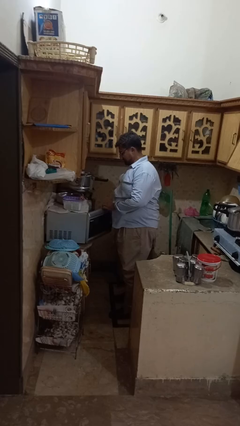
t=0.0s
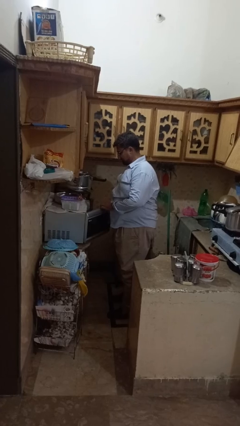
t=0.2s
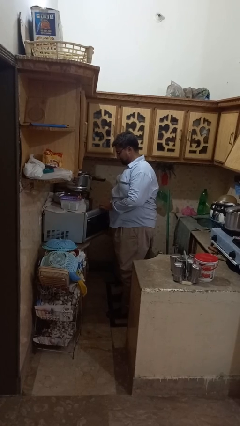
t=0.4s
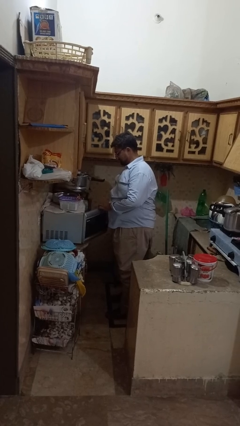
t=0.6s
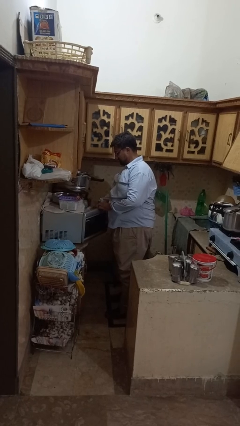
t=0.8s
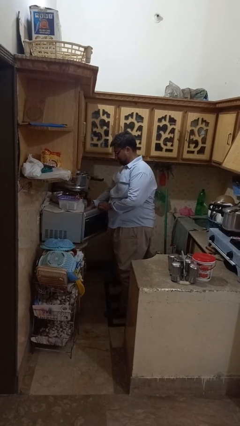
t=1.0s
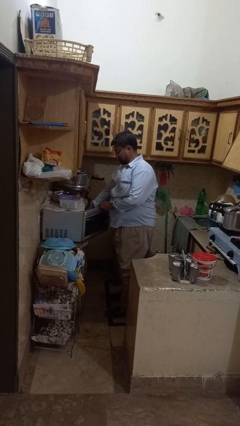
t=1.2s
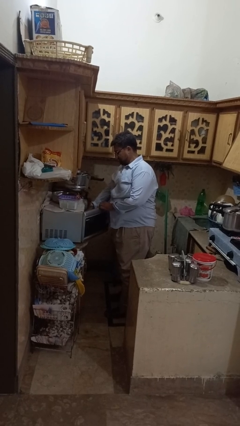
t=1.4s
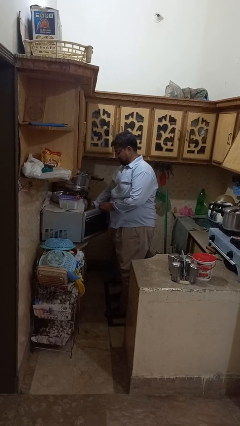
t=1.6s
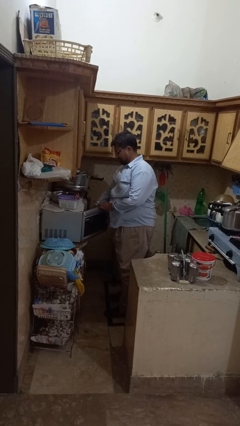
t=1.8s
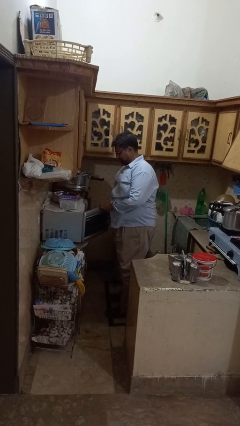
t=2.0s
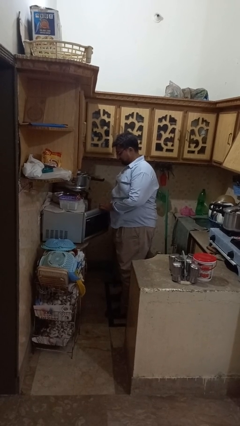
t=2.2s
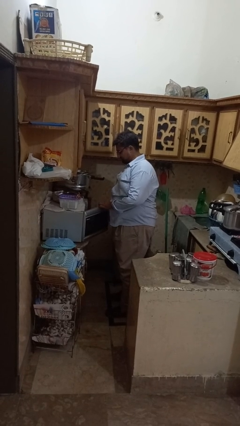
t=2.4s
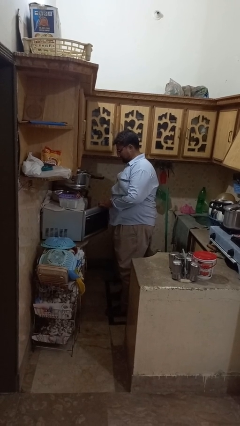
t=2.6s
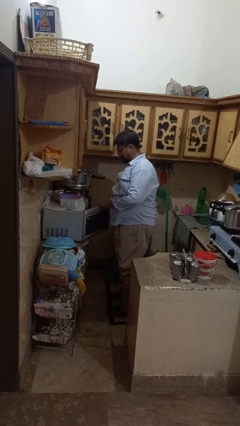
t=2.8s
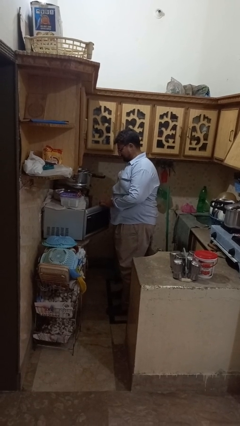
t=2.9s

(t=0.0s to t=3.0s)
person puts object into microwave

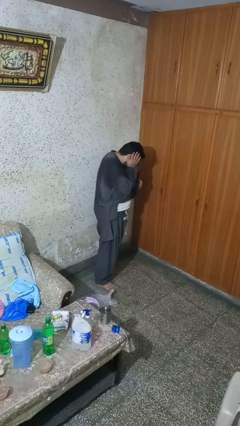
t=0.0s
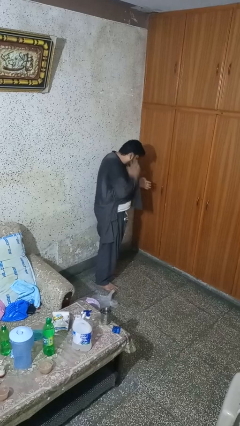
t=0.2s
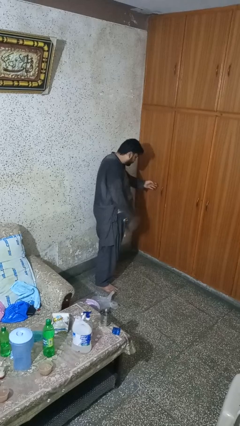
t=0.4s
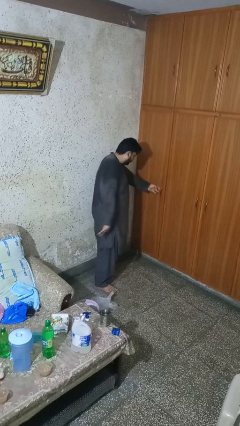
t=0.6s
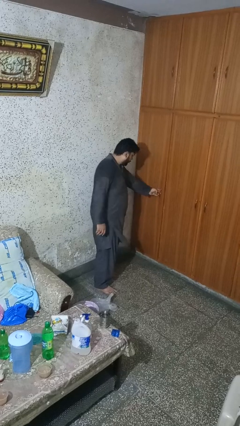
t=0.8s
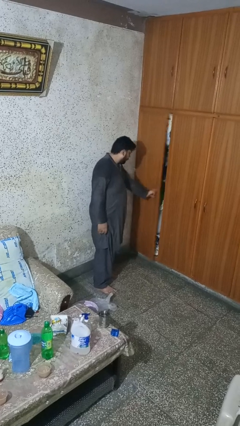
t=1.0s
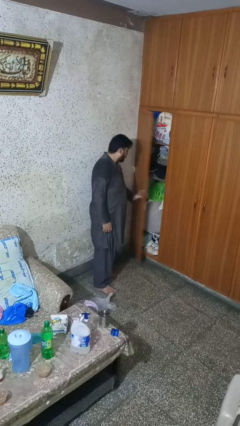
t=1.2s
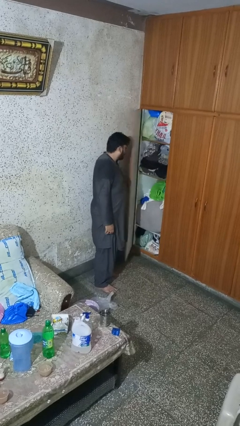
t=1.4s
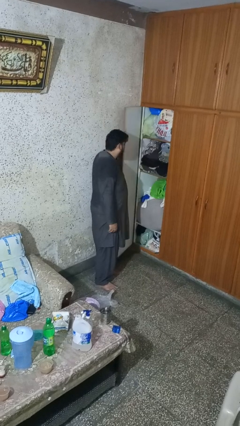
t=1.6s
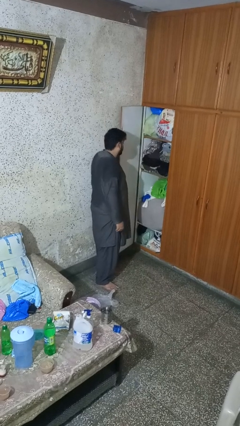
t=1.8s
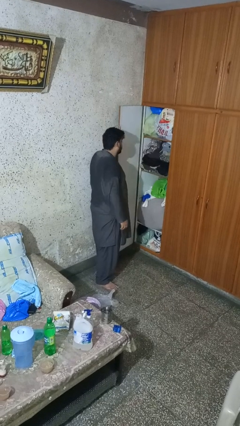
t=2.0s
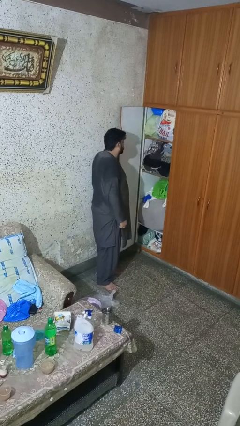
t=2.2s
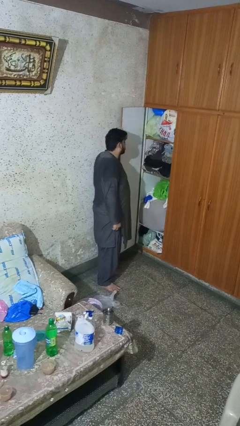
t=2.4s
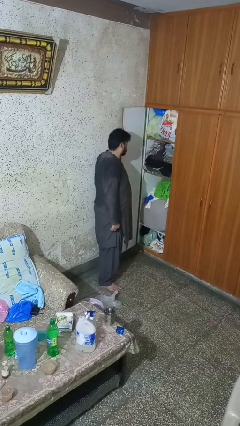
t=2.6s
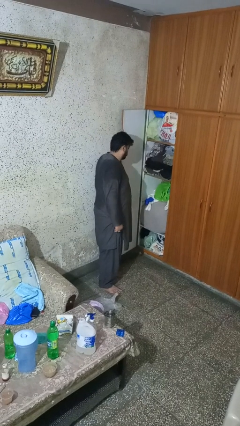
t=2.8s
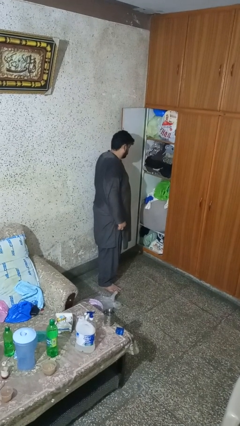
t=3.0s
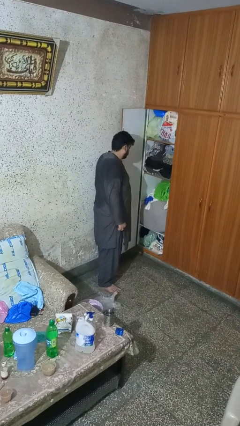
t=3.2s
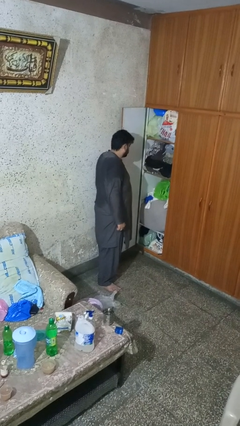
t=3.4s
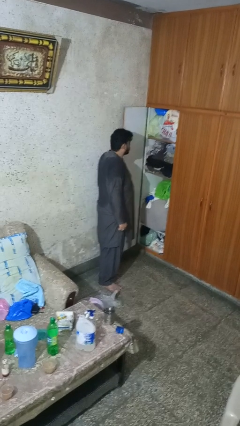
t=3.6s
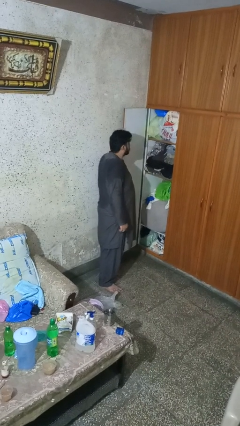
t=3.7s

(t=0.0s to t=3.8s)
person opens closet door

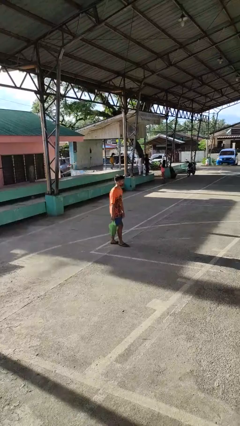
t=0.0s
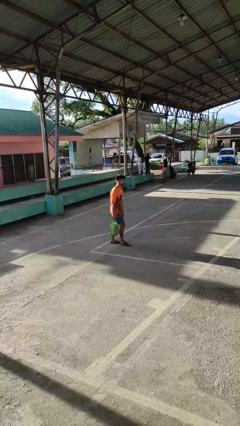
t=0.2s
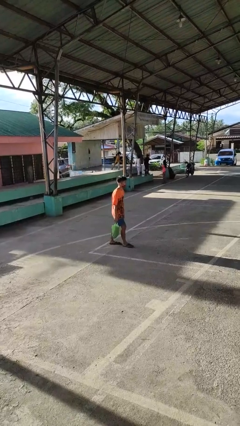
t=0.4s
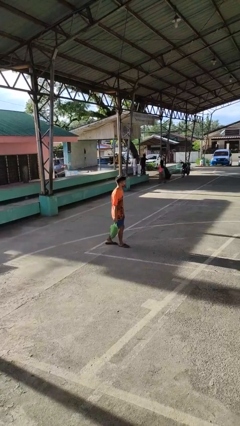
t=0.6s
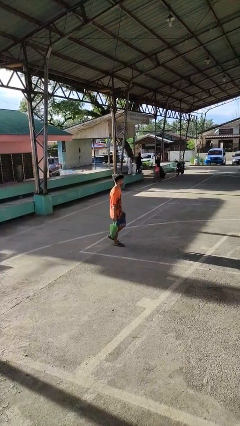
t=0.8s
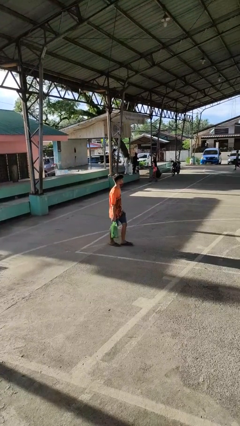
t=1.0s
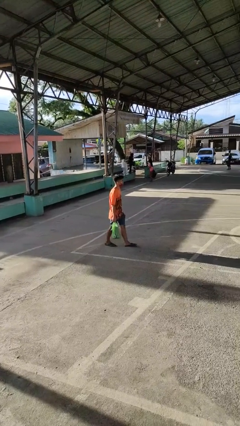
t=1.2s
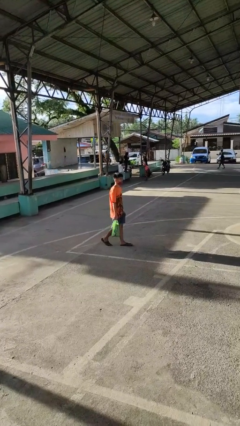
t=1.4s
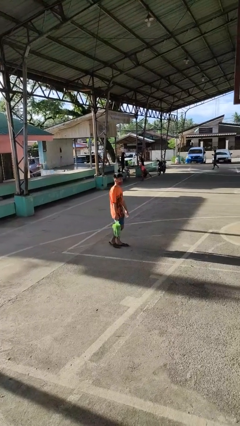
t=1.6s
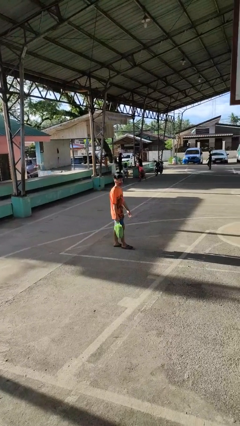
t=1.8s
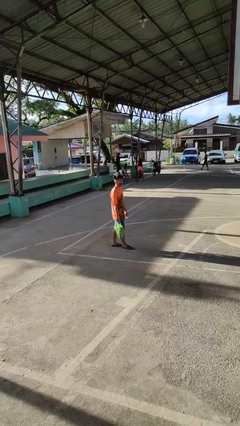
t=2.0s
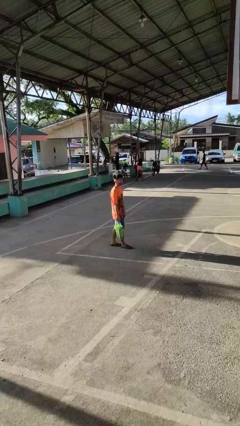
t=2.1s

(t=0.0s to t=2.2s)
person carries groceries

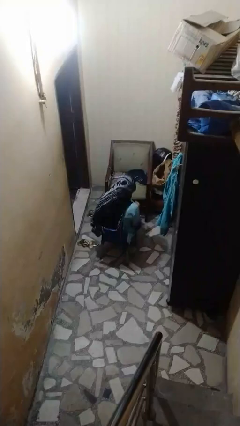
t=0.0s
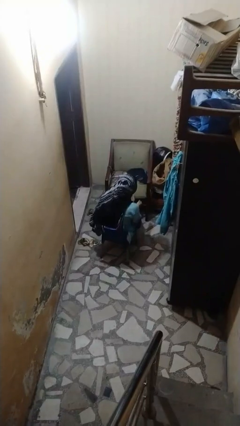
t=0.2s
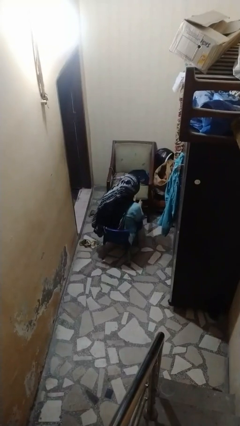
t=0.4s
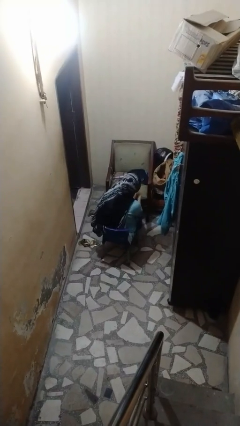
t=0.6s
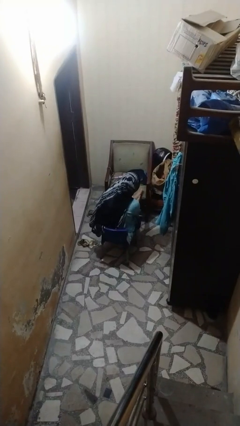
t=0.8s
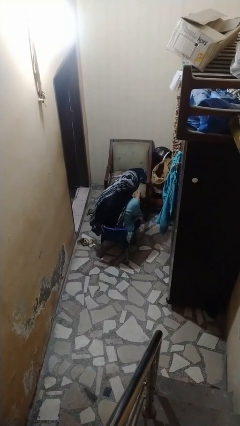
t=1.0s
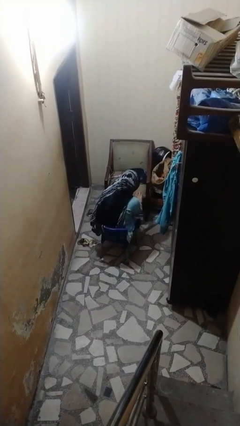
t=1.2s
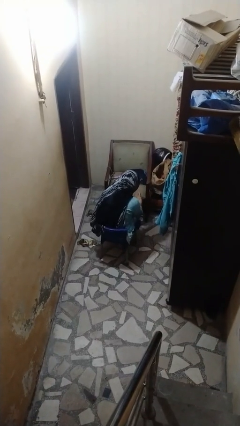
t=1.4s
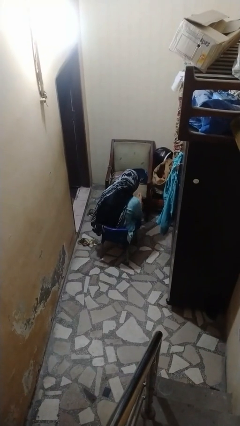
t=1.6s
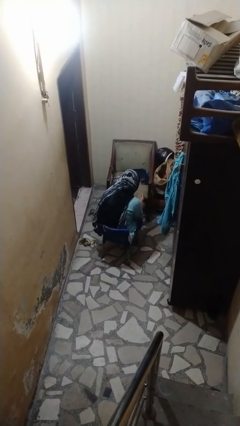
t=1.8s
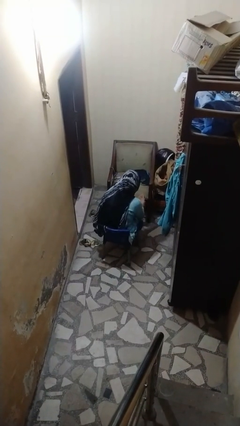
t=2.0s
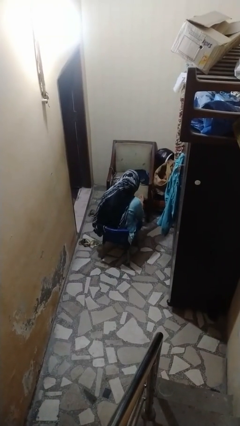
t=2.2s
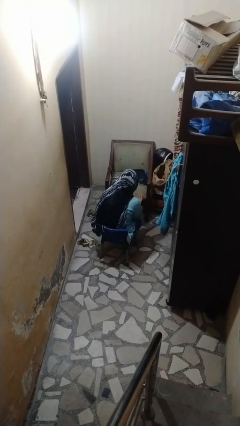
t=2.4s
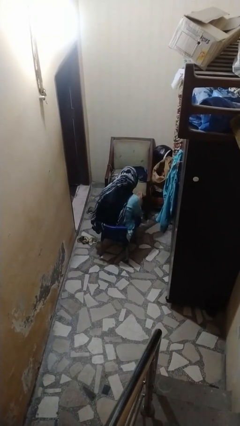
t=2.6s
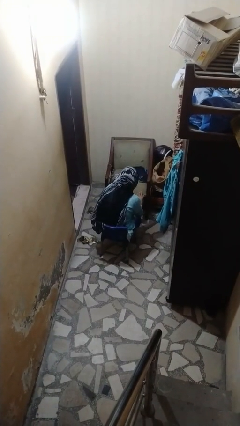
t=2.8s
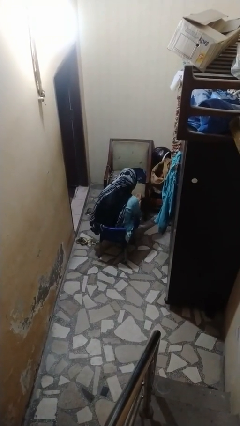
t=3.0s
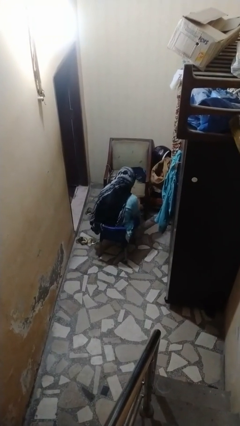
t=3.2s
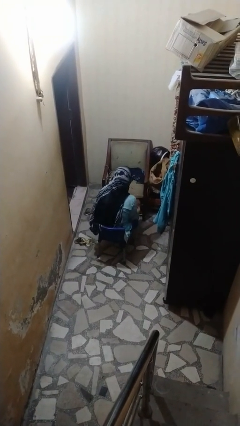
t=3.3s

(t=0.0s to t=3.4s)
person rubs foot

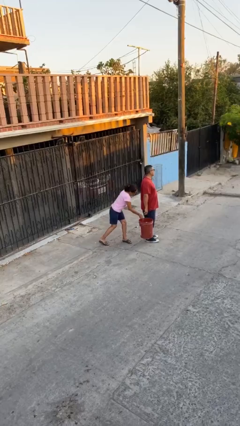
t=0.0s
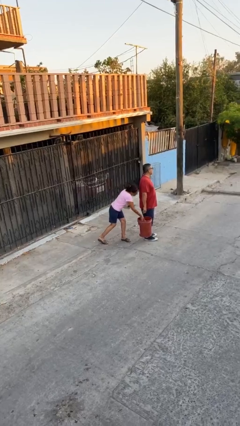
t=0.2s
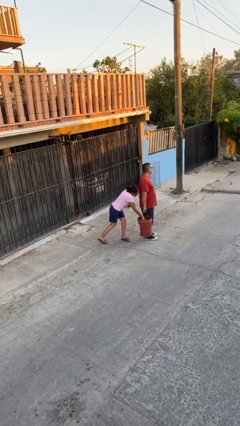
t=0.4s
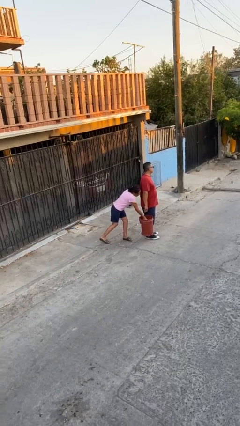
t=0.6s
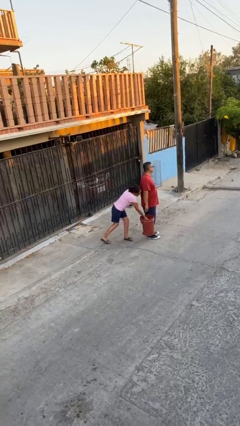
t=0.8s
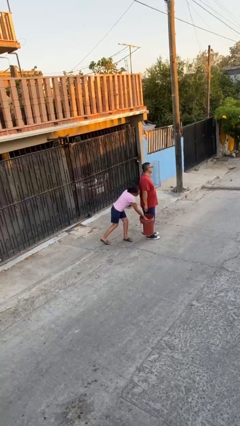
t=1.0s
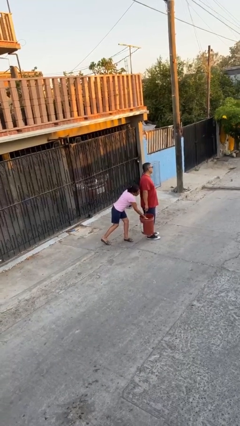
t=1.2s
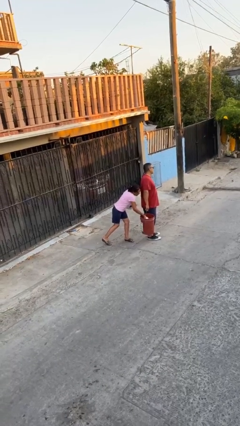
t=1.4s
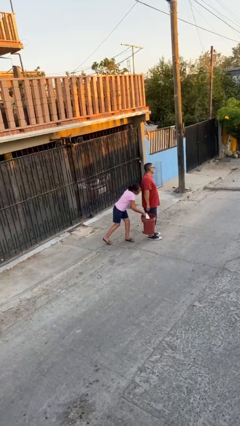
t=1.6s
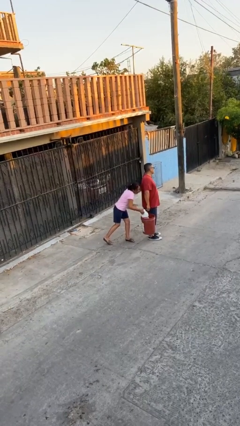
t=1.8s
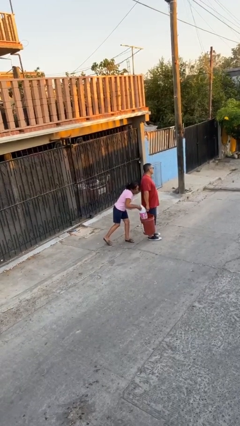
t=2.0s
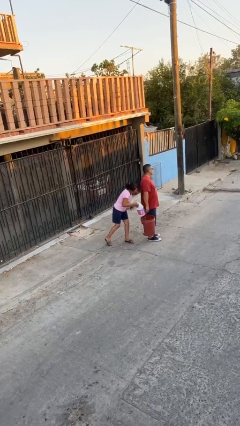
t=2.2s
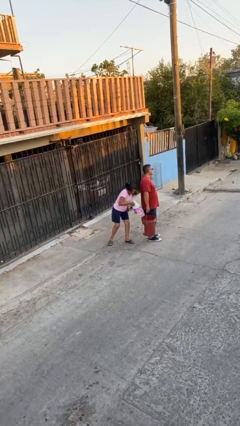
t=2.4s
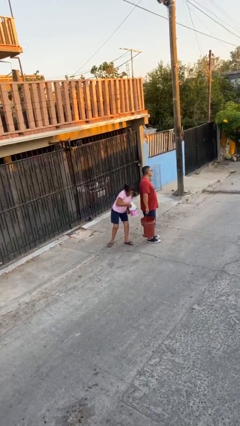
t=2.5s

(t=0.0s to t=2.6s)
person steals object from person

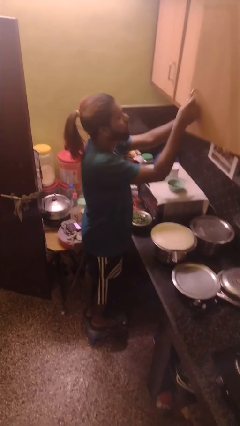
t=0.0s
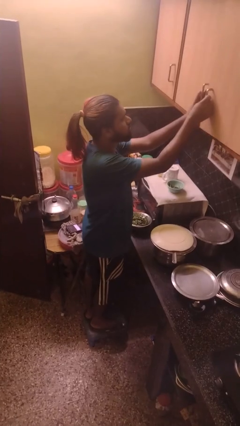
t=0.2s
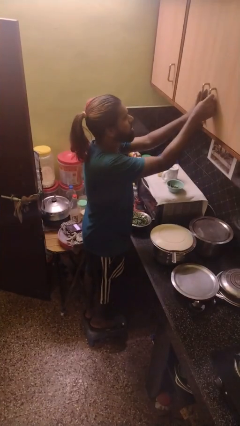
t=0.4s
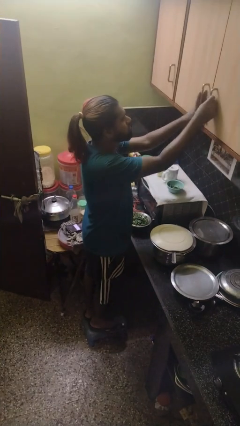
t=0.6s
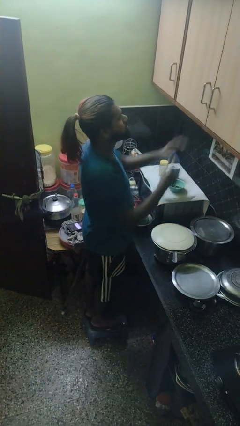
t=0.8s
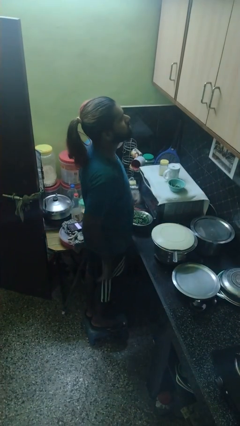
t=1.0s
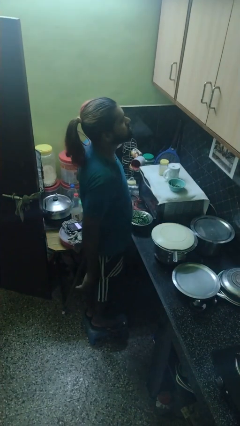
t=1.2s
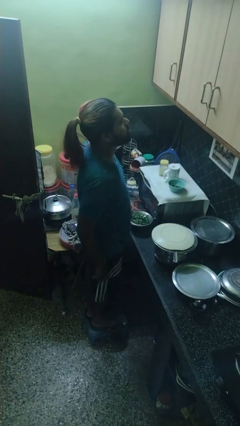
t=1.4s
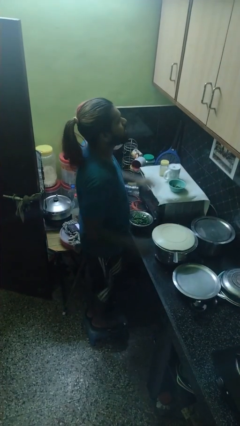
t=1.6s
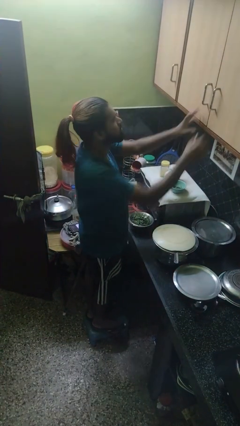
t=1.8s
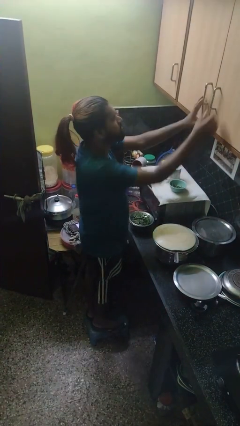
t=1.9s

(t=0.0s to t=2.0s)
person closes cabinet
